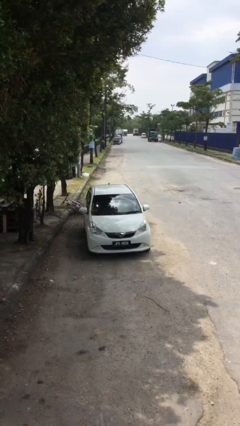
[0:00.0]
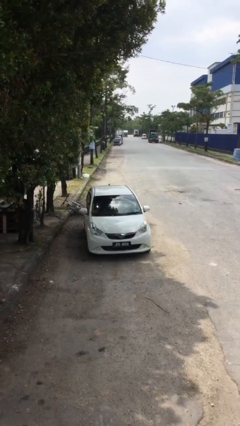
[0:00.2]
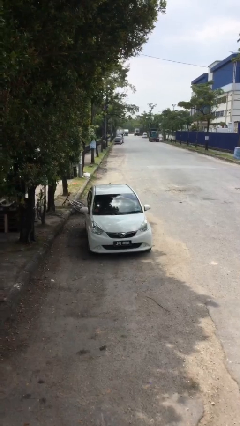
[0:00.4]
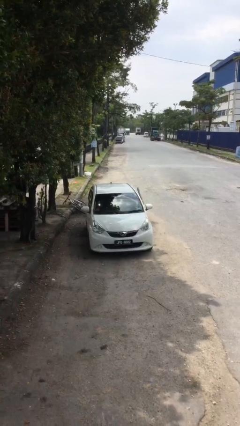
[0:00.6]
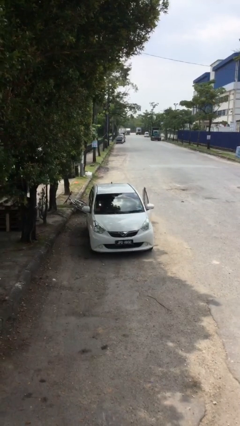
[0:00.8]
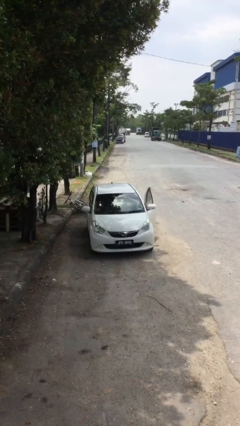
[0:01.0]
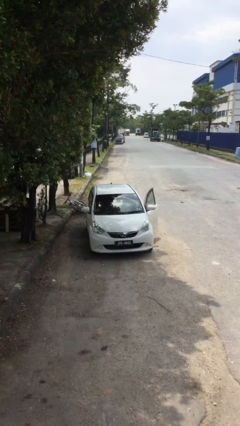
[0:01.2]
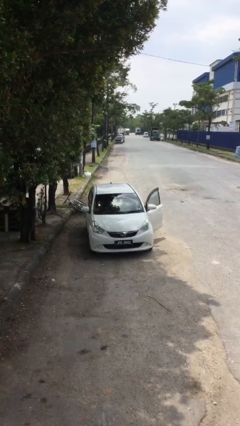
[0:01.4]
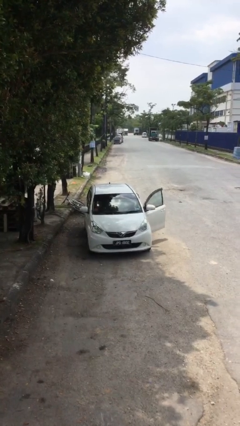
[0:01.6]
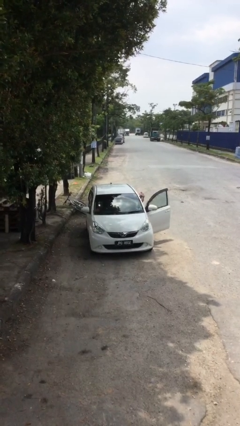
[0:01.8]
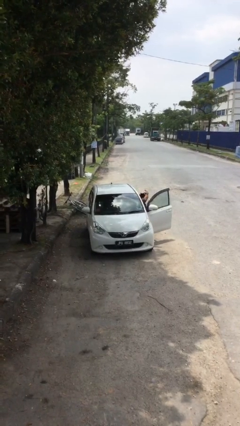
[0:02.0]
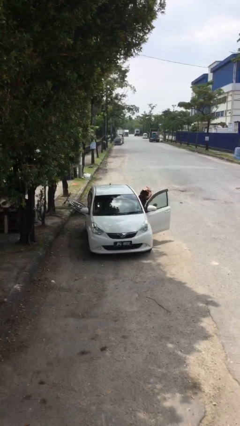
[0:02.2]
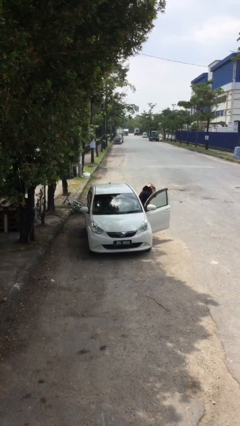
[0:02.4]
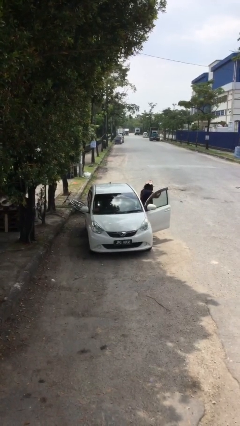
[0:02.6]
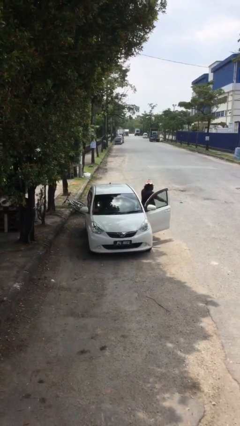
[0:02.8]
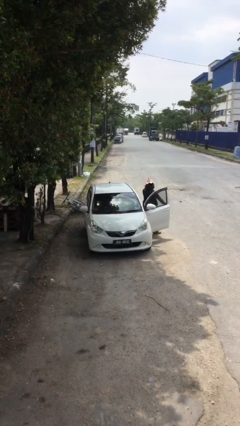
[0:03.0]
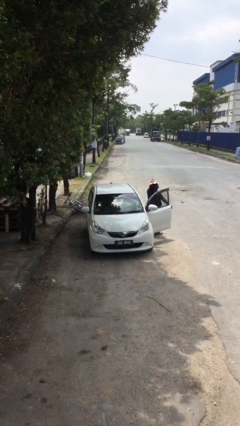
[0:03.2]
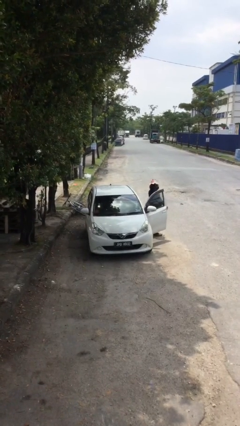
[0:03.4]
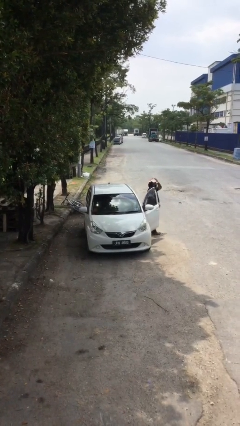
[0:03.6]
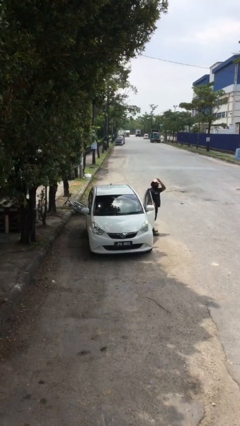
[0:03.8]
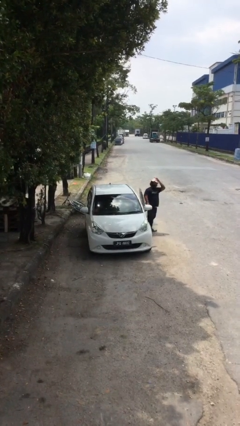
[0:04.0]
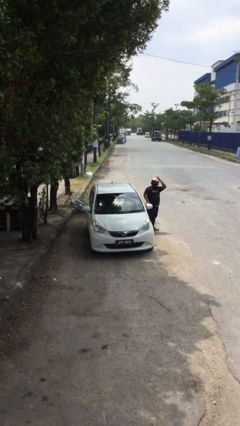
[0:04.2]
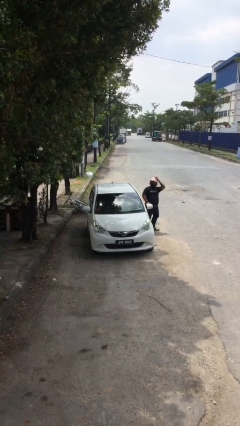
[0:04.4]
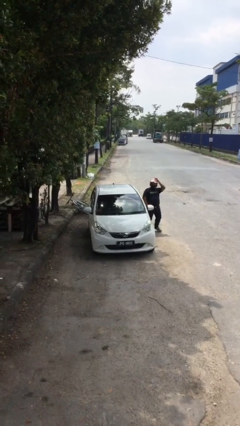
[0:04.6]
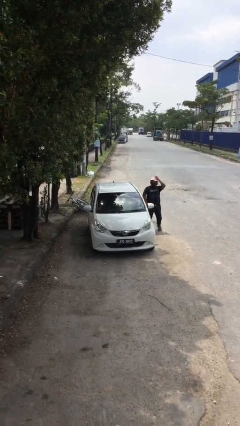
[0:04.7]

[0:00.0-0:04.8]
car drops off person

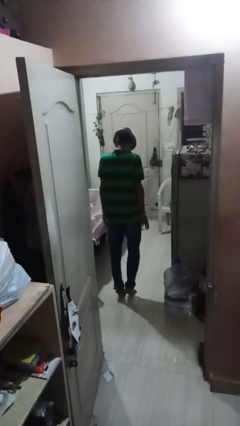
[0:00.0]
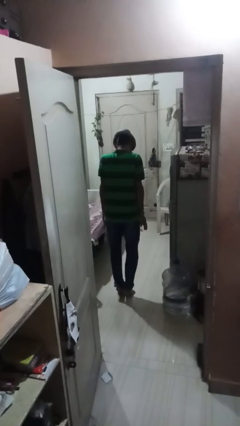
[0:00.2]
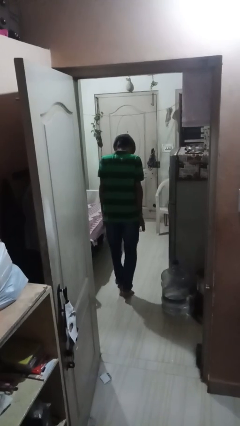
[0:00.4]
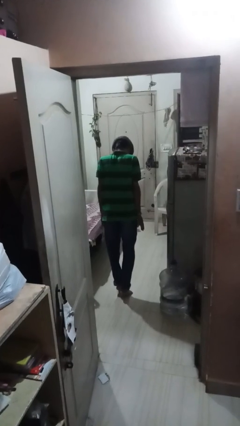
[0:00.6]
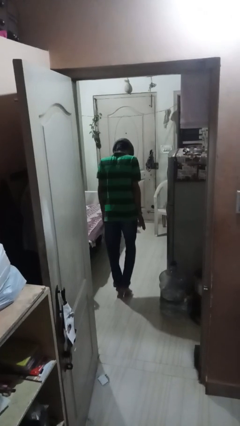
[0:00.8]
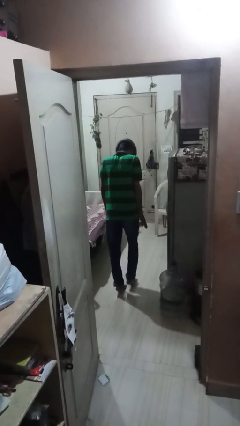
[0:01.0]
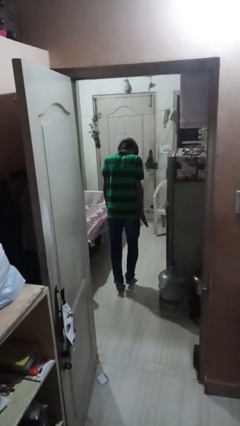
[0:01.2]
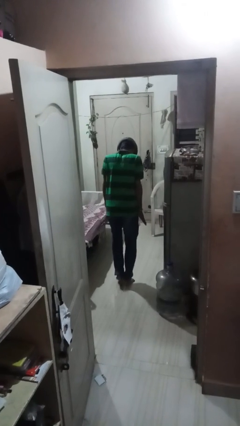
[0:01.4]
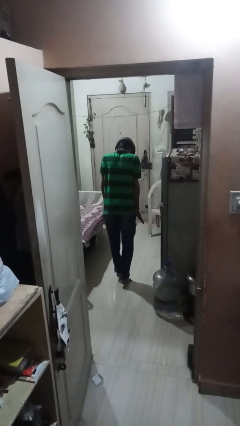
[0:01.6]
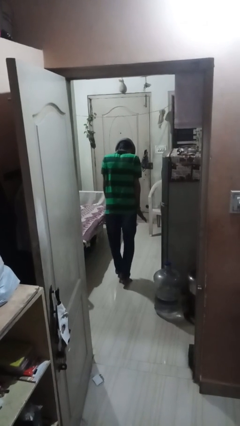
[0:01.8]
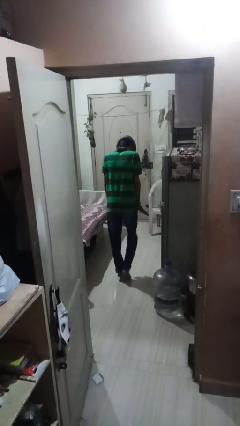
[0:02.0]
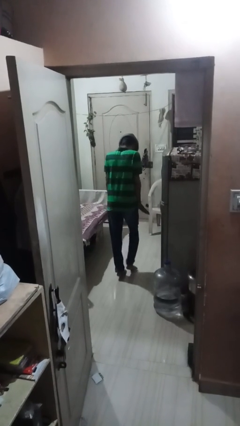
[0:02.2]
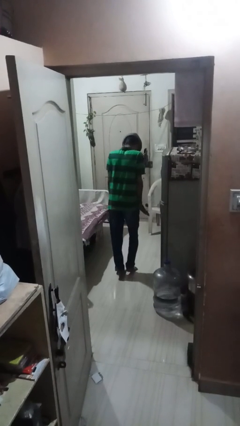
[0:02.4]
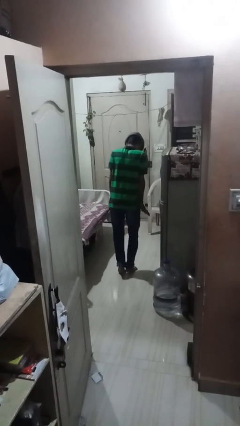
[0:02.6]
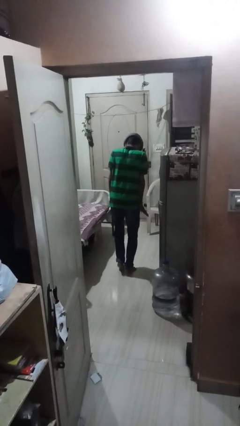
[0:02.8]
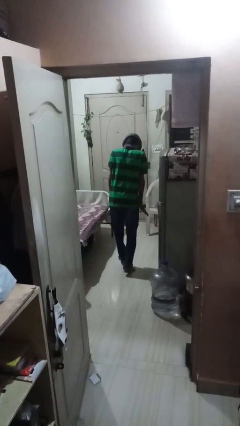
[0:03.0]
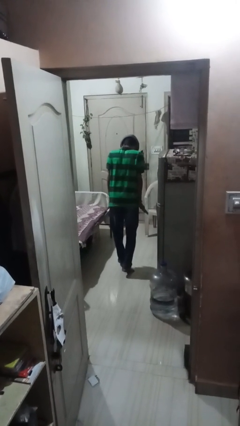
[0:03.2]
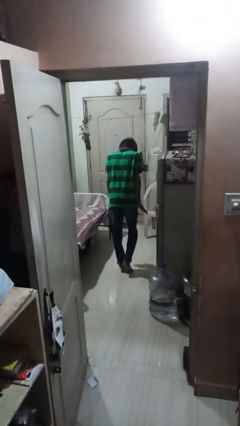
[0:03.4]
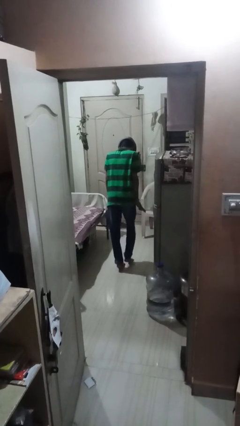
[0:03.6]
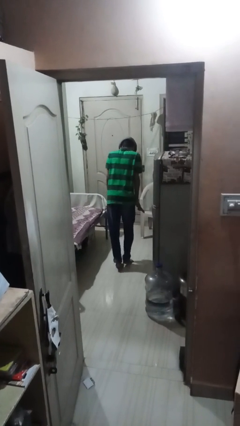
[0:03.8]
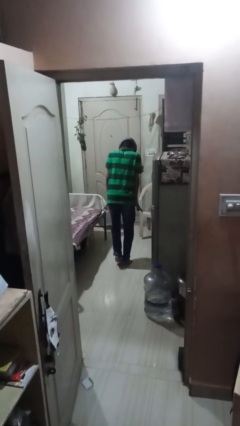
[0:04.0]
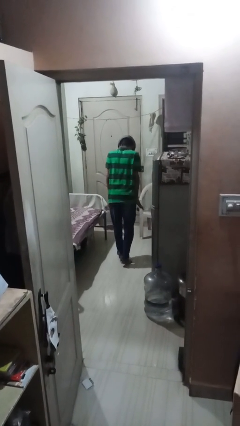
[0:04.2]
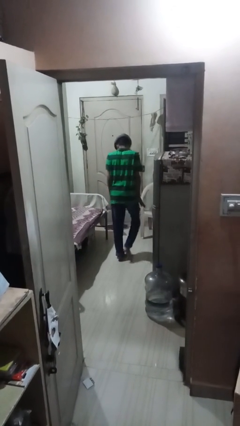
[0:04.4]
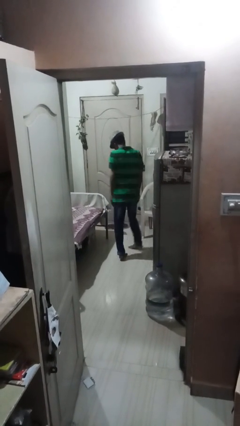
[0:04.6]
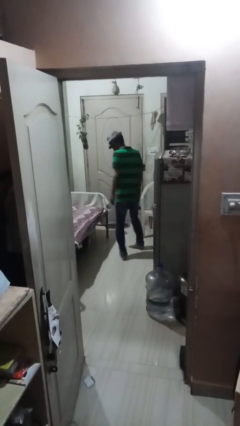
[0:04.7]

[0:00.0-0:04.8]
person walks tiptoe

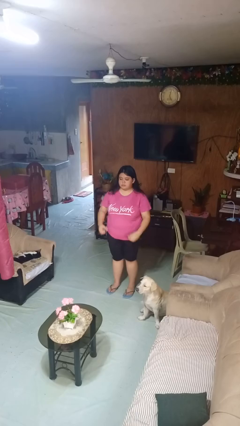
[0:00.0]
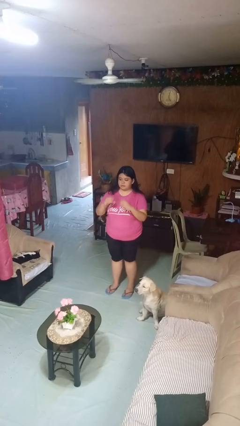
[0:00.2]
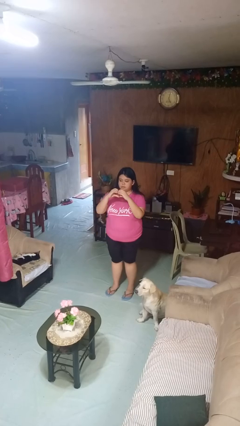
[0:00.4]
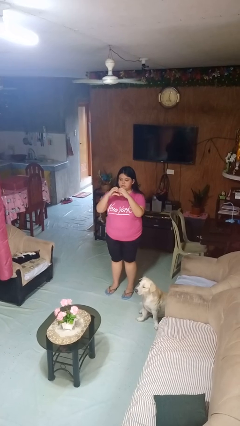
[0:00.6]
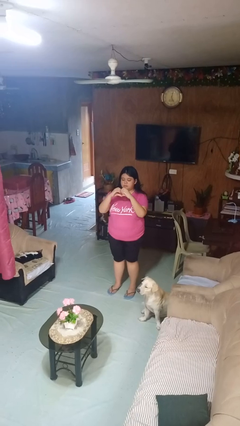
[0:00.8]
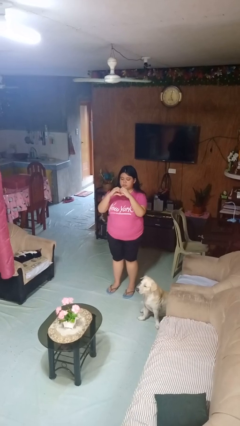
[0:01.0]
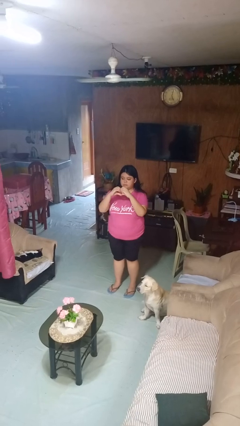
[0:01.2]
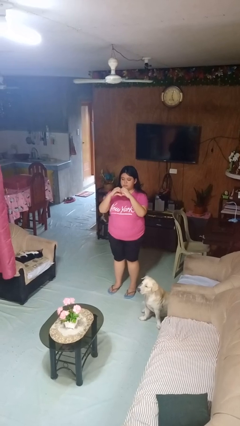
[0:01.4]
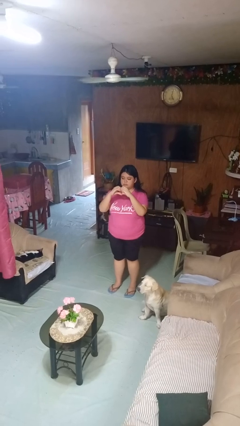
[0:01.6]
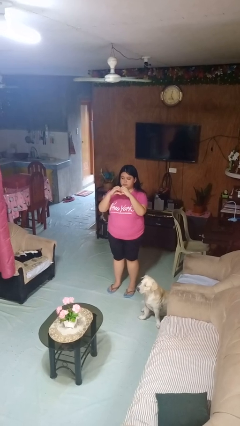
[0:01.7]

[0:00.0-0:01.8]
person gestures heart

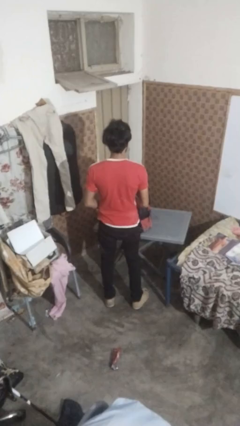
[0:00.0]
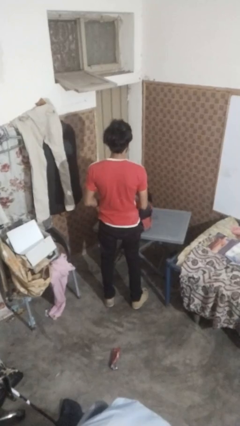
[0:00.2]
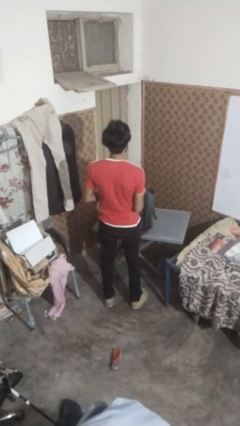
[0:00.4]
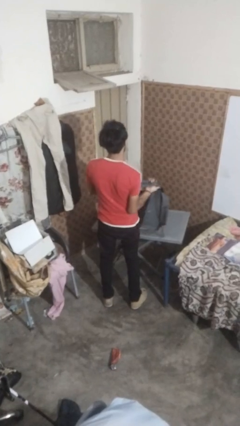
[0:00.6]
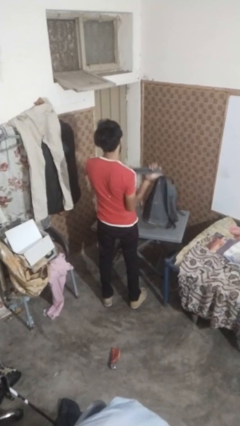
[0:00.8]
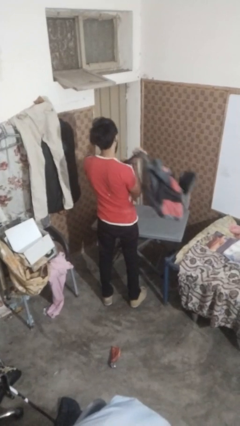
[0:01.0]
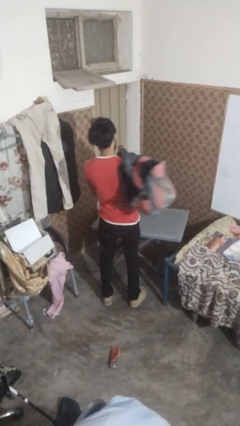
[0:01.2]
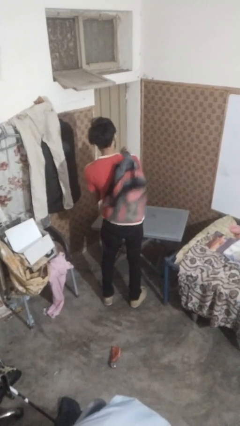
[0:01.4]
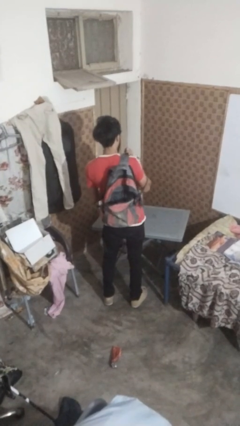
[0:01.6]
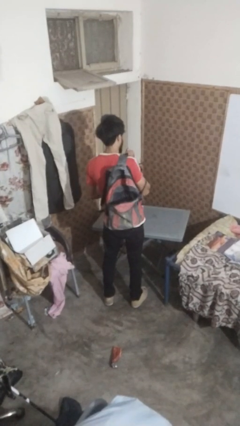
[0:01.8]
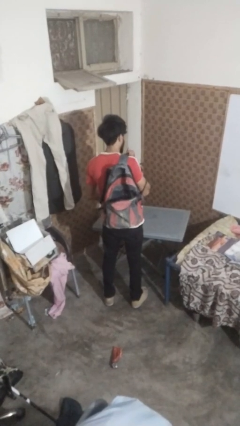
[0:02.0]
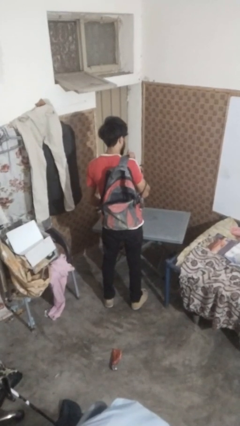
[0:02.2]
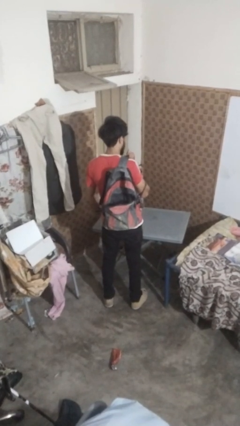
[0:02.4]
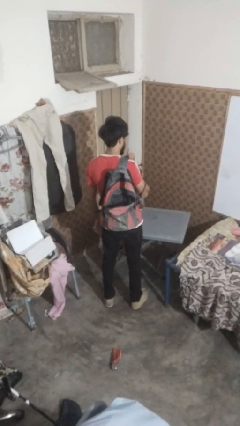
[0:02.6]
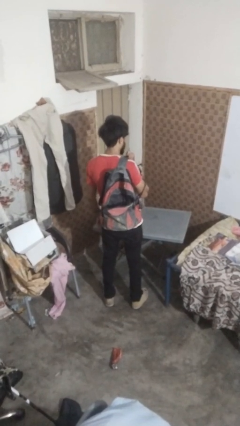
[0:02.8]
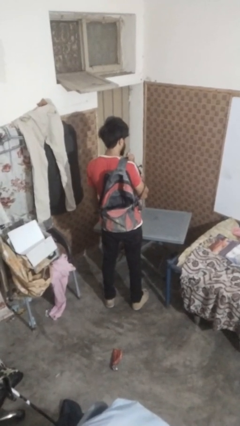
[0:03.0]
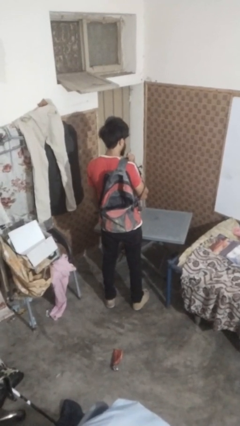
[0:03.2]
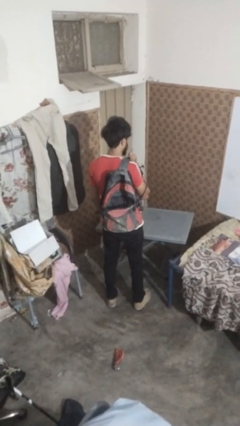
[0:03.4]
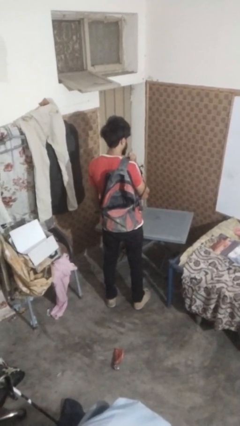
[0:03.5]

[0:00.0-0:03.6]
person puts on backpack

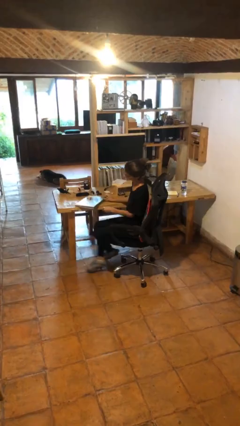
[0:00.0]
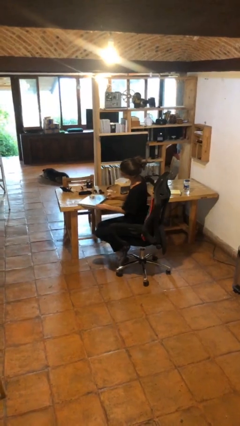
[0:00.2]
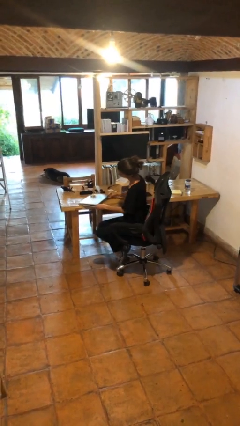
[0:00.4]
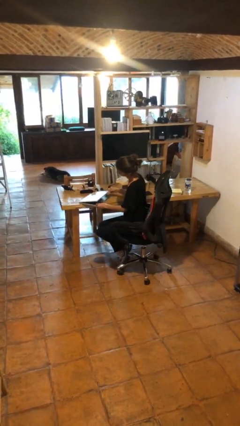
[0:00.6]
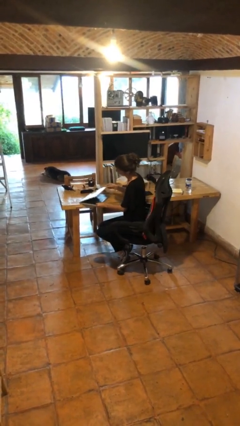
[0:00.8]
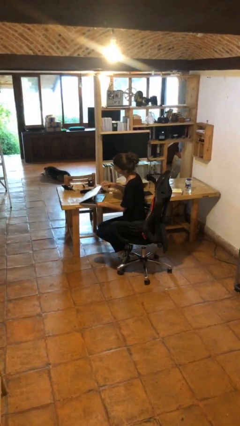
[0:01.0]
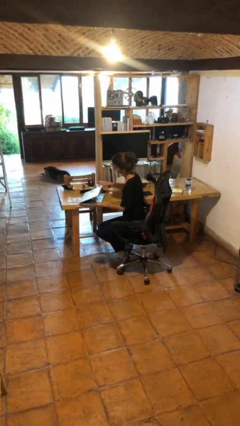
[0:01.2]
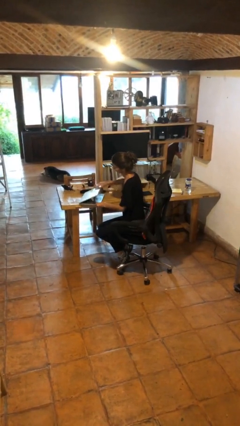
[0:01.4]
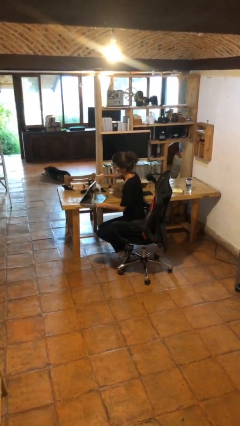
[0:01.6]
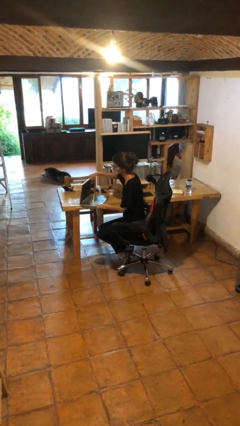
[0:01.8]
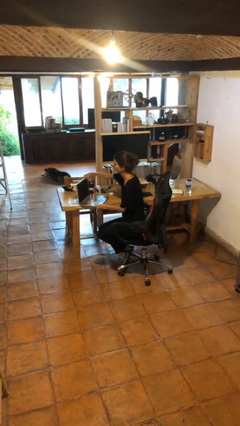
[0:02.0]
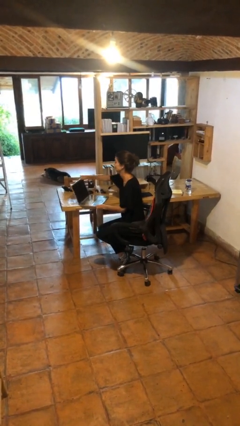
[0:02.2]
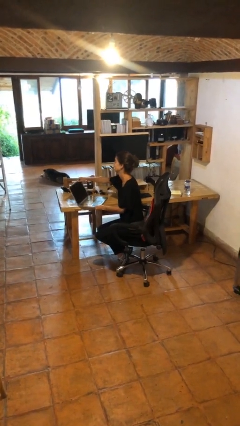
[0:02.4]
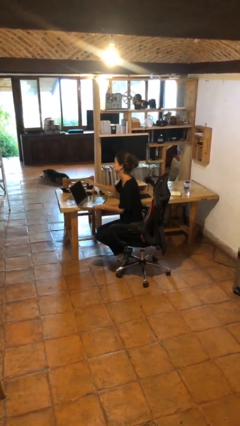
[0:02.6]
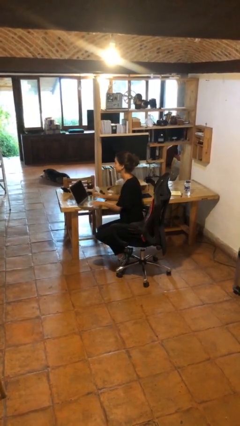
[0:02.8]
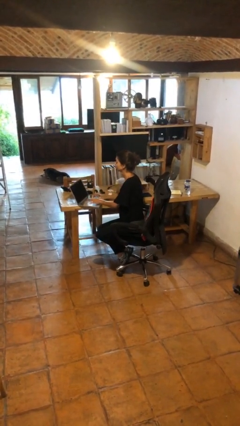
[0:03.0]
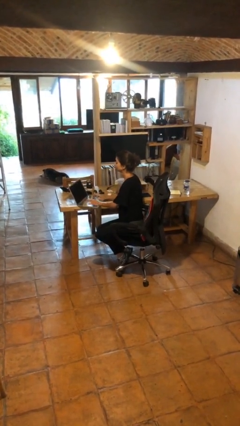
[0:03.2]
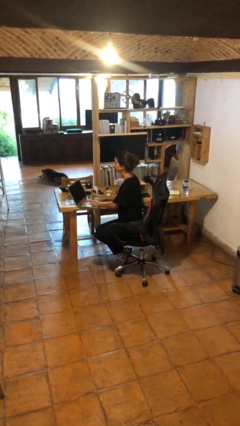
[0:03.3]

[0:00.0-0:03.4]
person opens laptop
